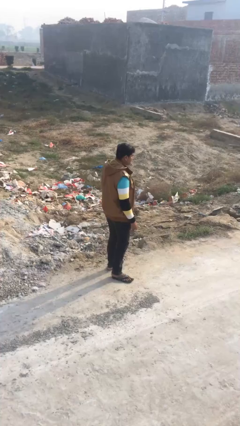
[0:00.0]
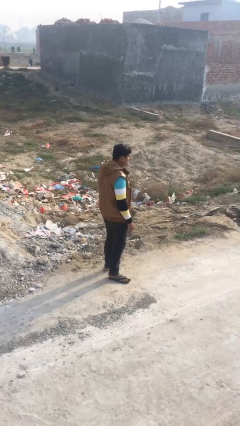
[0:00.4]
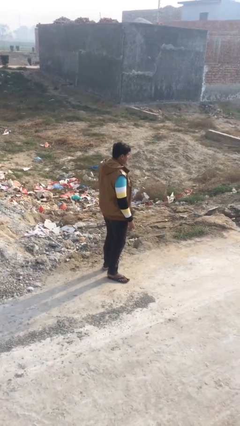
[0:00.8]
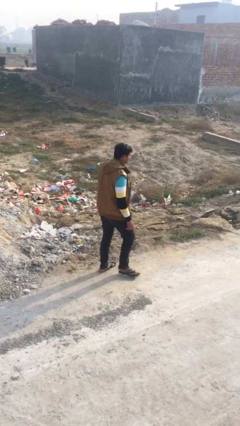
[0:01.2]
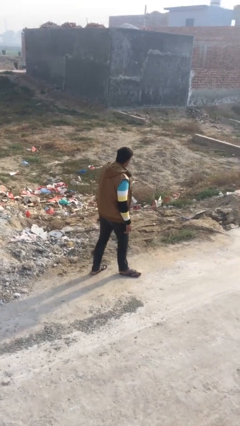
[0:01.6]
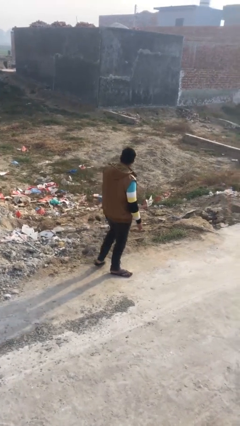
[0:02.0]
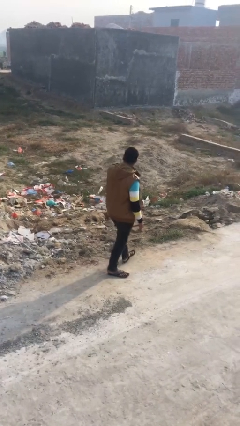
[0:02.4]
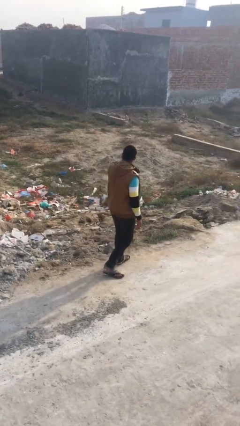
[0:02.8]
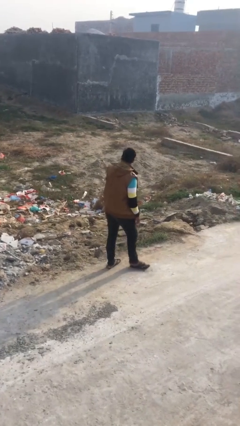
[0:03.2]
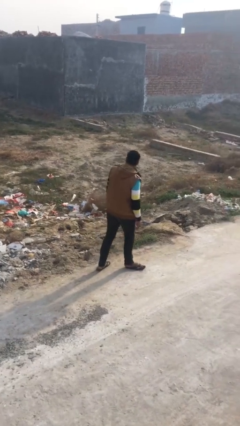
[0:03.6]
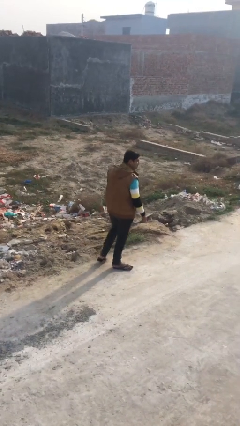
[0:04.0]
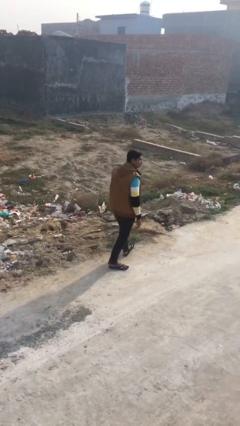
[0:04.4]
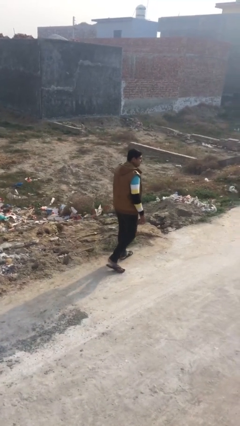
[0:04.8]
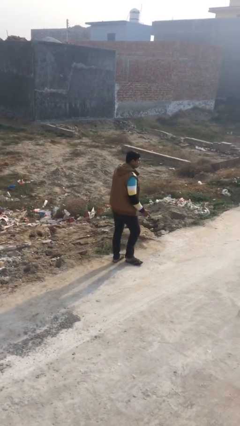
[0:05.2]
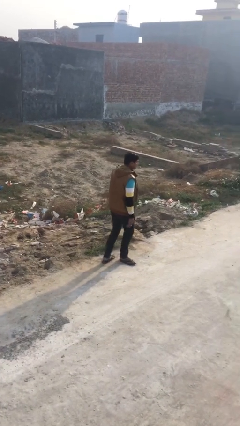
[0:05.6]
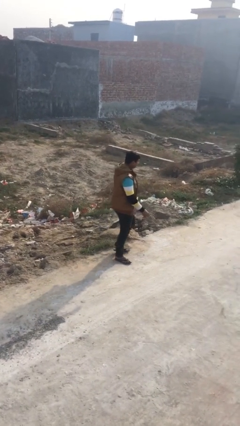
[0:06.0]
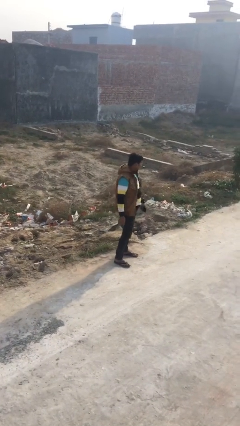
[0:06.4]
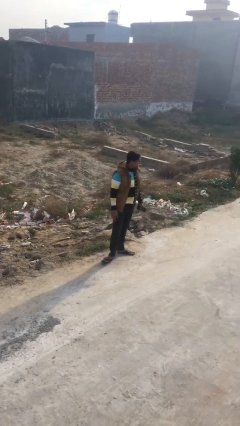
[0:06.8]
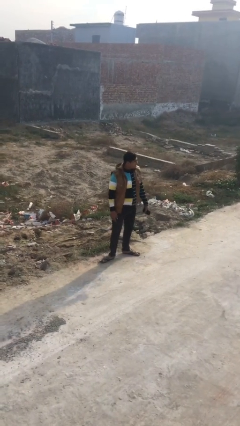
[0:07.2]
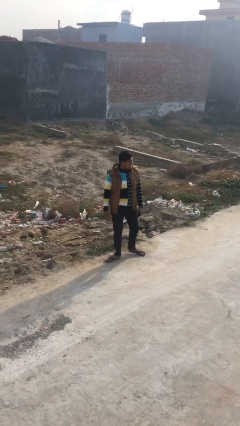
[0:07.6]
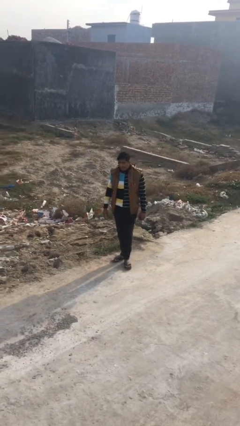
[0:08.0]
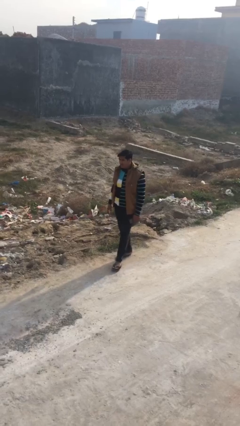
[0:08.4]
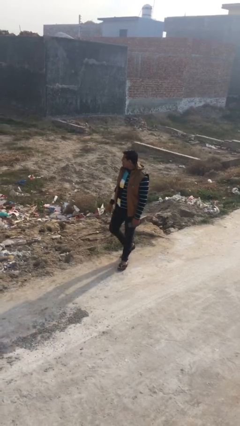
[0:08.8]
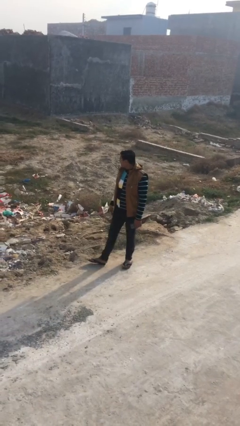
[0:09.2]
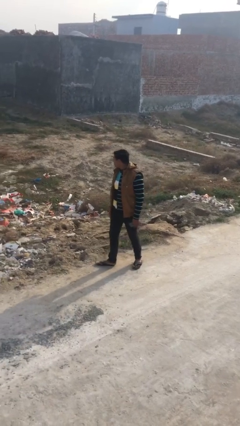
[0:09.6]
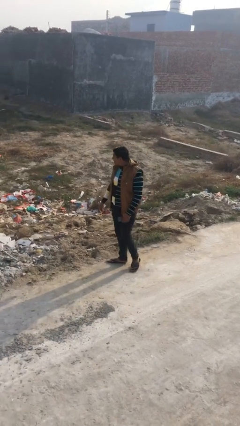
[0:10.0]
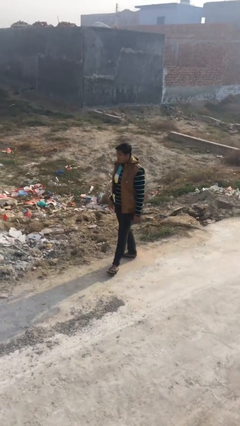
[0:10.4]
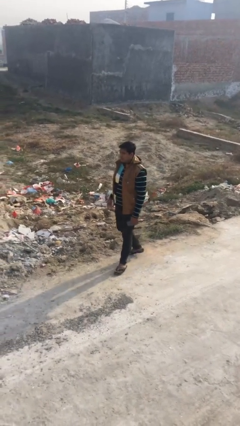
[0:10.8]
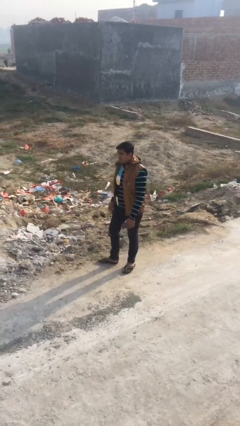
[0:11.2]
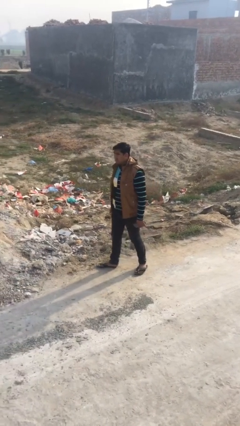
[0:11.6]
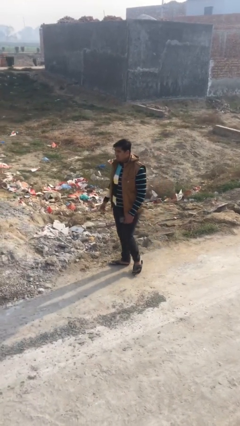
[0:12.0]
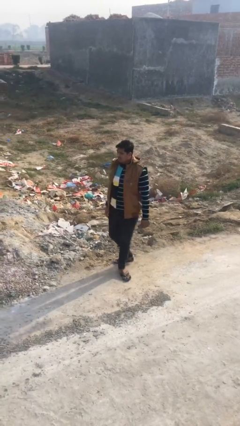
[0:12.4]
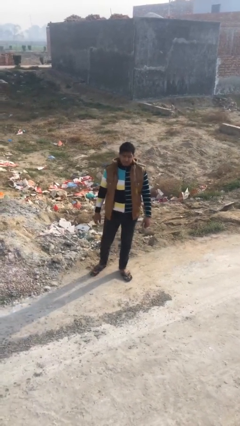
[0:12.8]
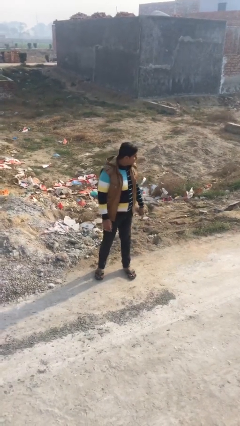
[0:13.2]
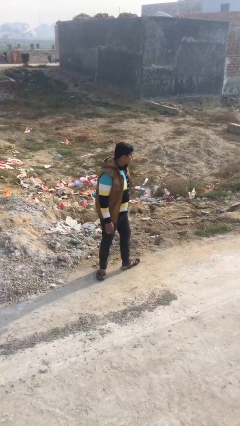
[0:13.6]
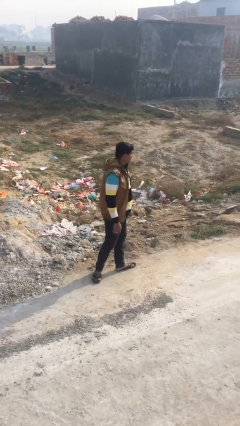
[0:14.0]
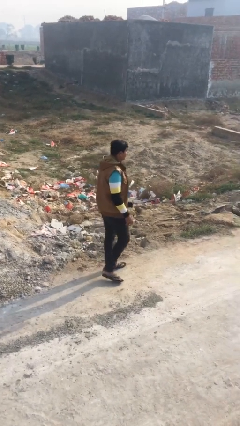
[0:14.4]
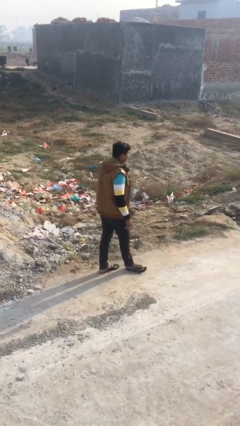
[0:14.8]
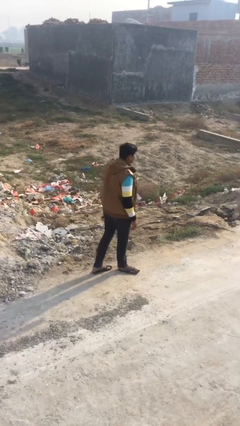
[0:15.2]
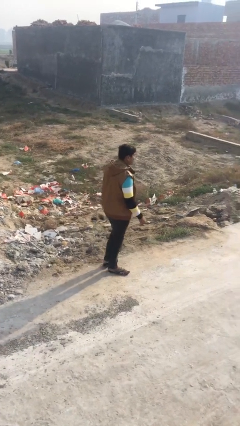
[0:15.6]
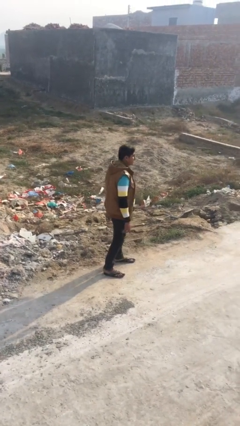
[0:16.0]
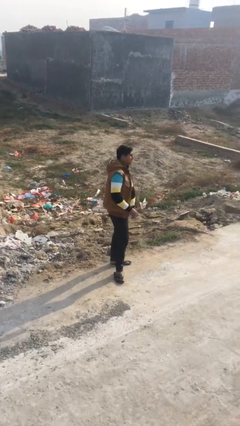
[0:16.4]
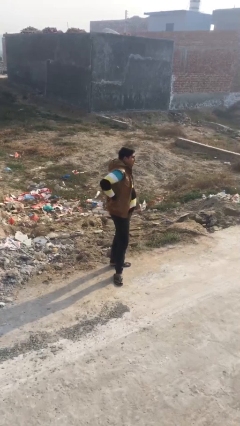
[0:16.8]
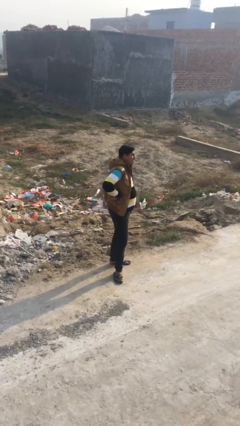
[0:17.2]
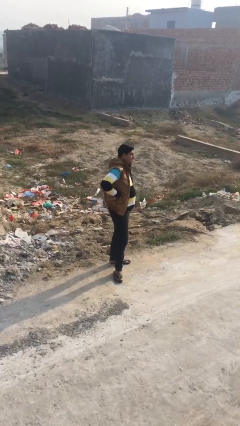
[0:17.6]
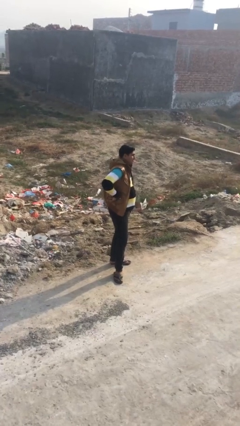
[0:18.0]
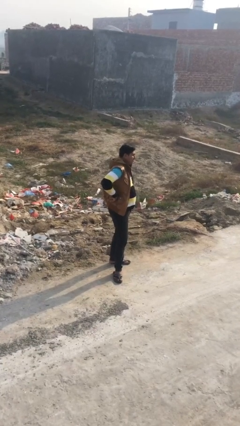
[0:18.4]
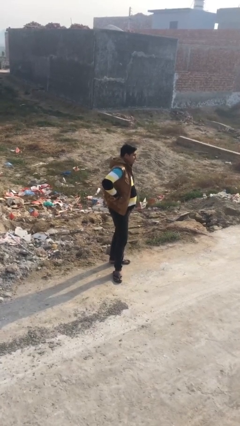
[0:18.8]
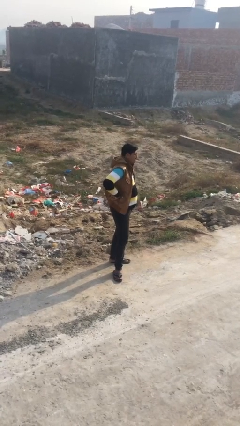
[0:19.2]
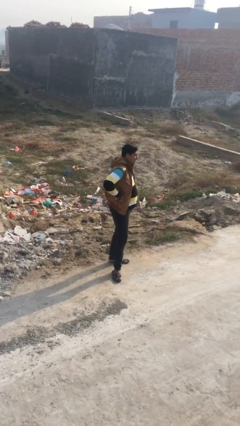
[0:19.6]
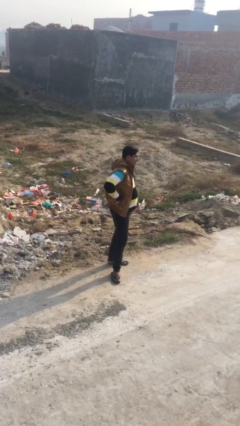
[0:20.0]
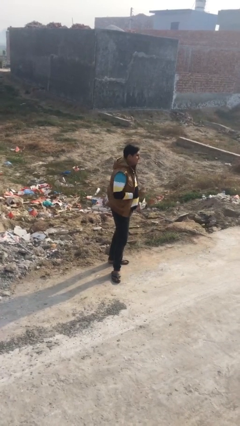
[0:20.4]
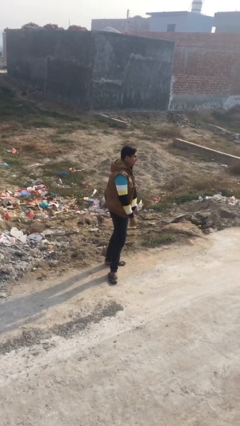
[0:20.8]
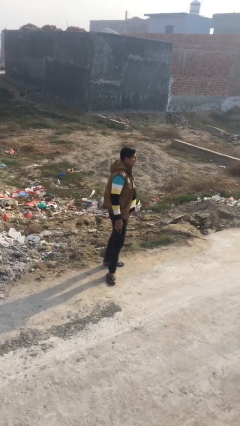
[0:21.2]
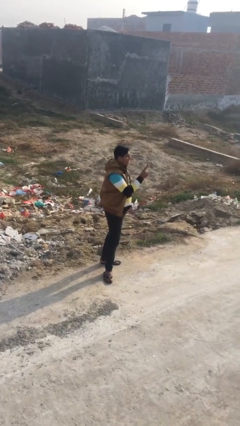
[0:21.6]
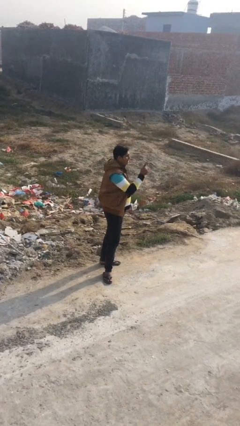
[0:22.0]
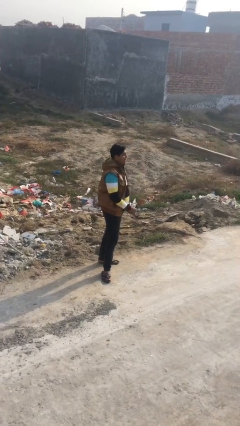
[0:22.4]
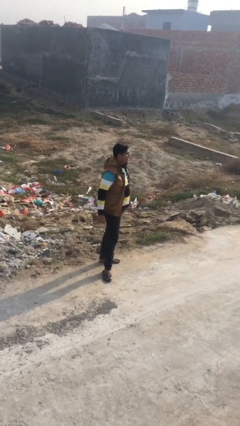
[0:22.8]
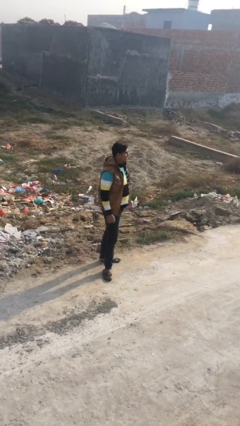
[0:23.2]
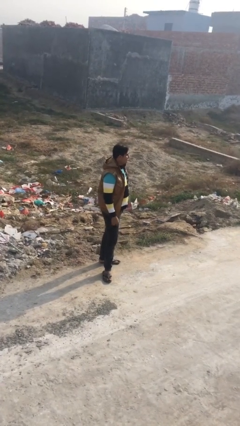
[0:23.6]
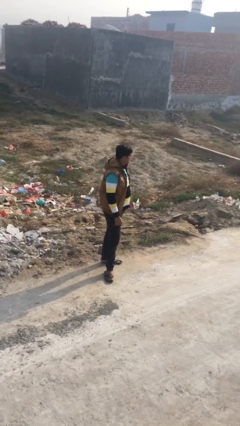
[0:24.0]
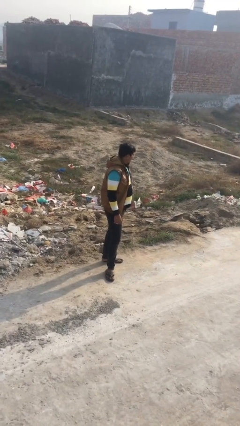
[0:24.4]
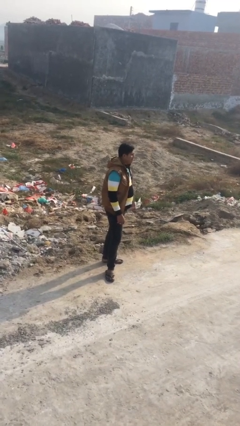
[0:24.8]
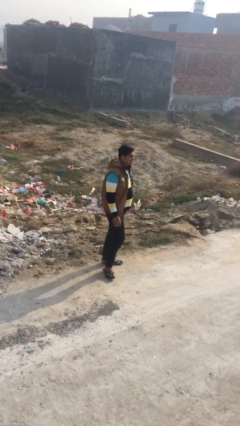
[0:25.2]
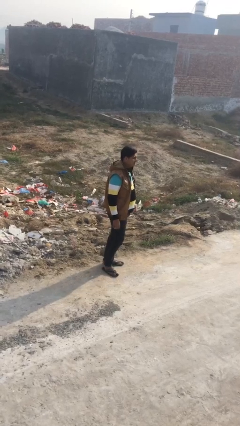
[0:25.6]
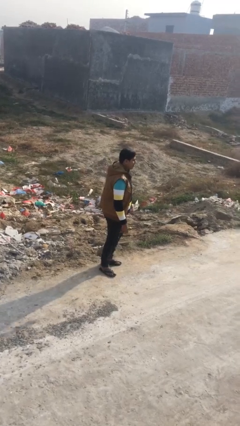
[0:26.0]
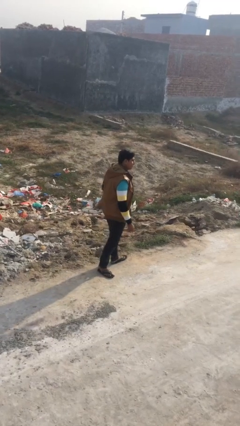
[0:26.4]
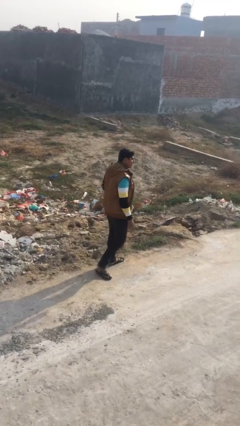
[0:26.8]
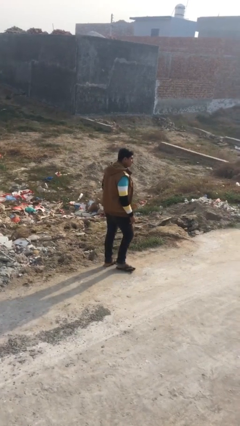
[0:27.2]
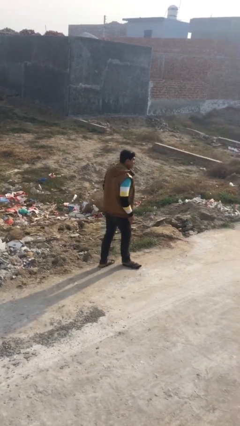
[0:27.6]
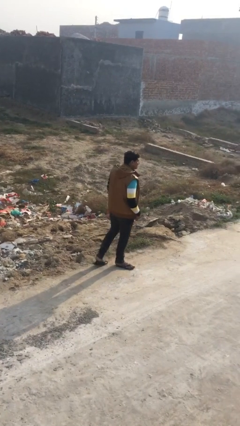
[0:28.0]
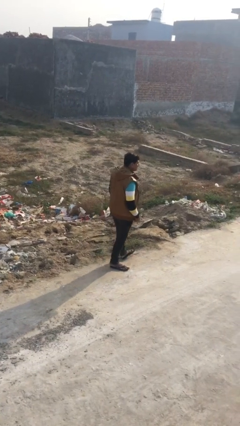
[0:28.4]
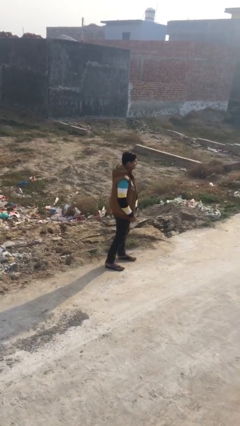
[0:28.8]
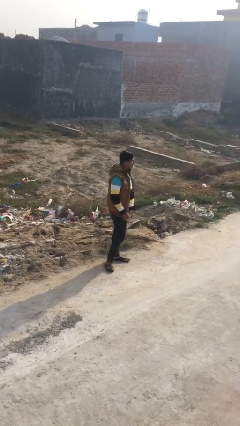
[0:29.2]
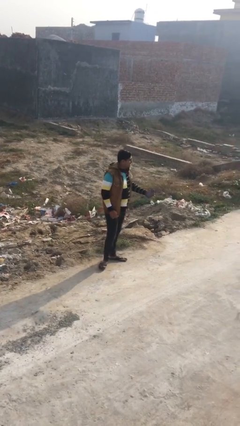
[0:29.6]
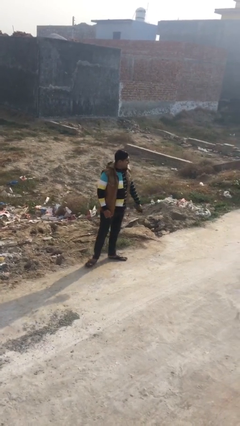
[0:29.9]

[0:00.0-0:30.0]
person walks

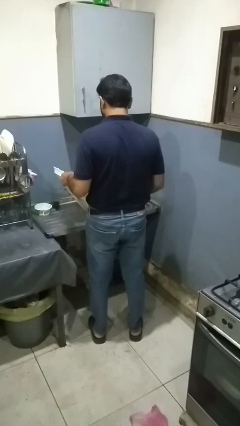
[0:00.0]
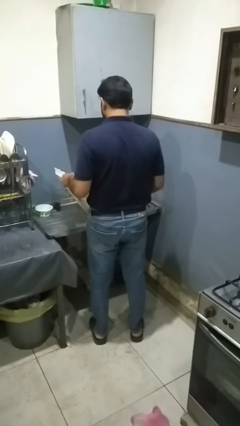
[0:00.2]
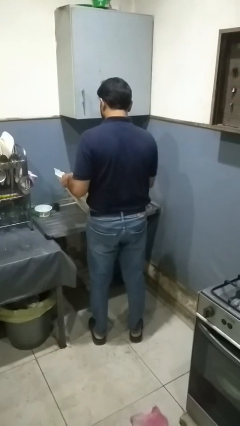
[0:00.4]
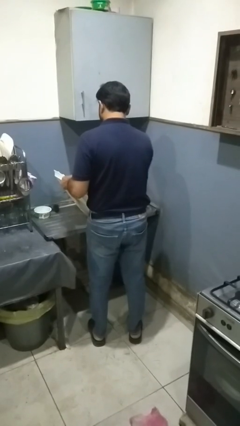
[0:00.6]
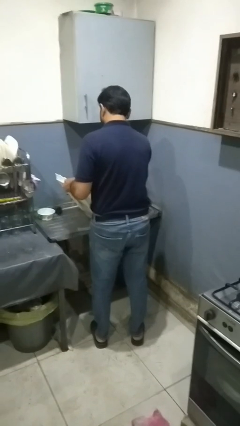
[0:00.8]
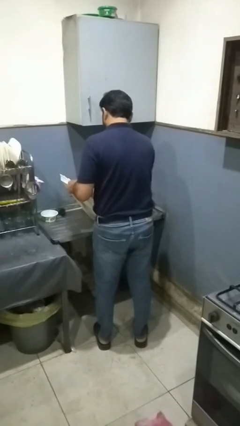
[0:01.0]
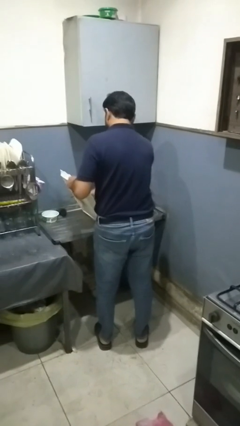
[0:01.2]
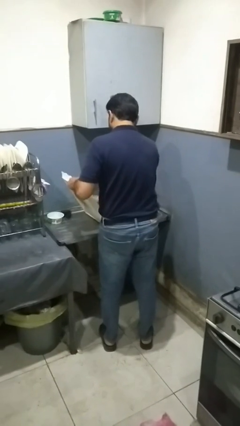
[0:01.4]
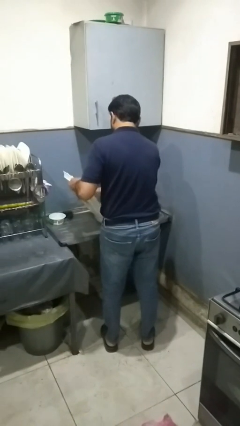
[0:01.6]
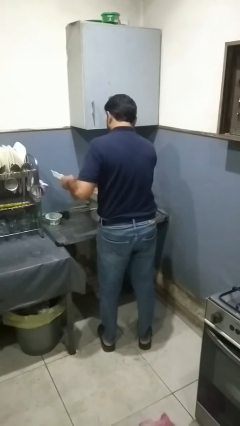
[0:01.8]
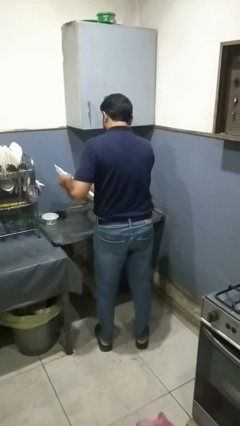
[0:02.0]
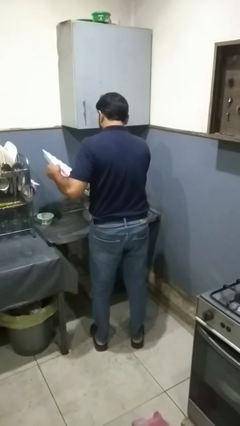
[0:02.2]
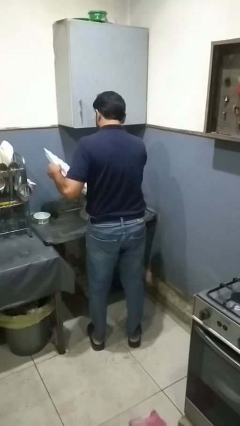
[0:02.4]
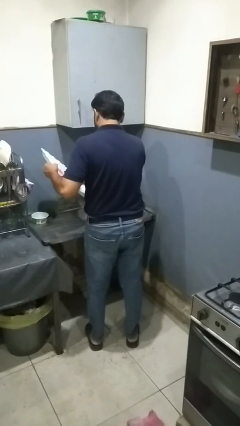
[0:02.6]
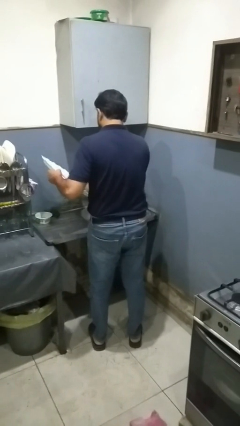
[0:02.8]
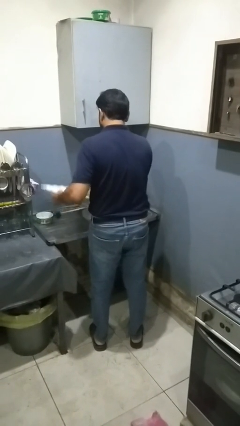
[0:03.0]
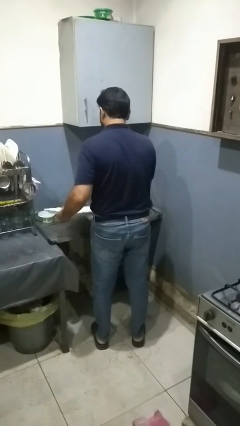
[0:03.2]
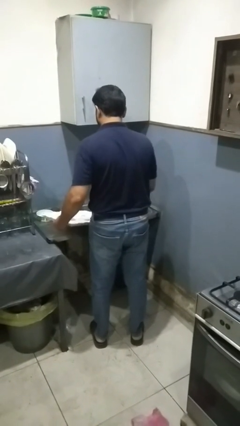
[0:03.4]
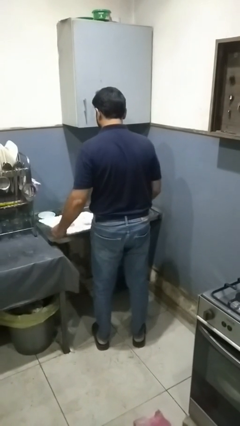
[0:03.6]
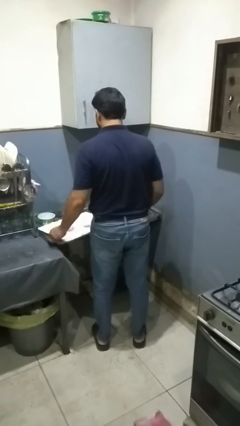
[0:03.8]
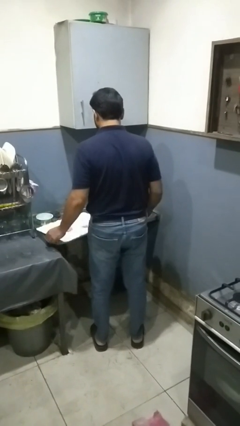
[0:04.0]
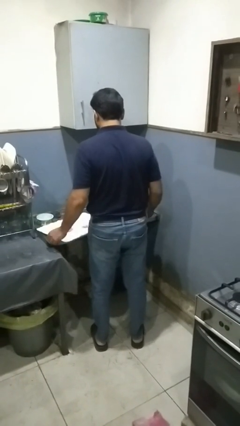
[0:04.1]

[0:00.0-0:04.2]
person washes dish
